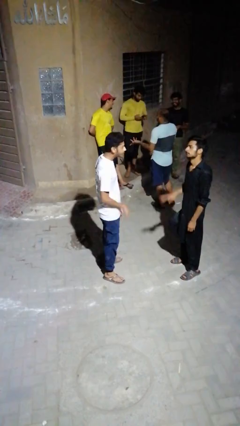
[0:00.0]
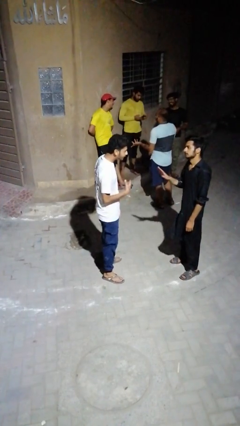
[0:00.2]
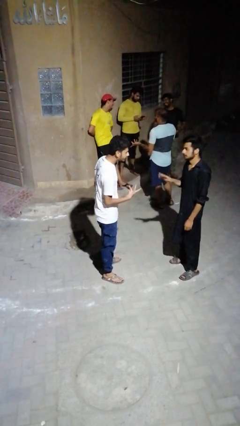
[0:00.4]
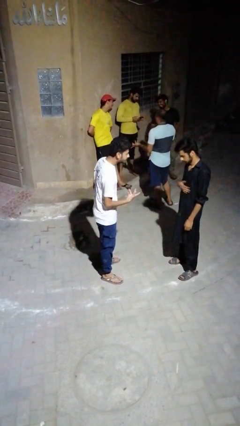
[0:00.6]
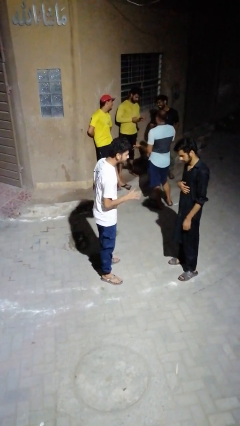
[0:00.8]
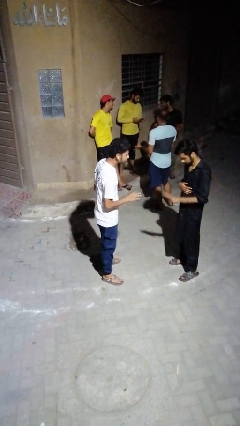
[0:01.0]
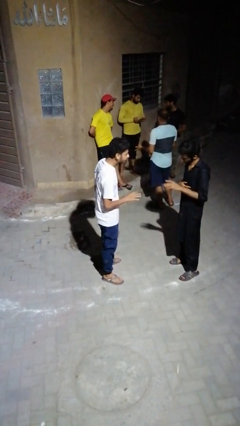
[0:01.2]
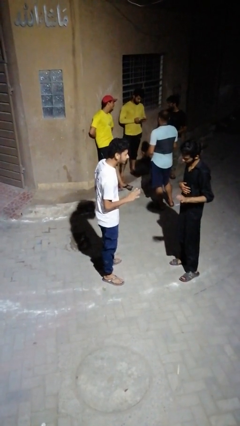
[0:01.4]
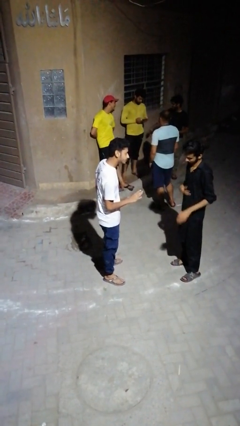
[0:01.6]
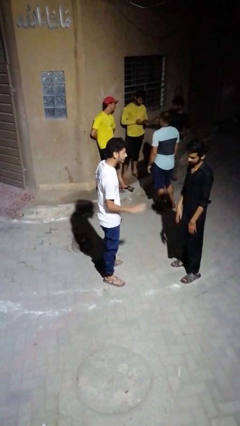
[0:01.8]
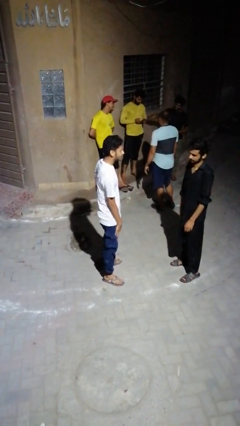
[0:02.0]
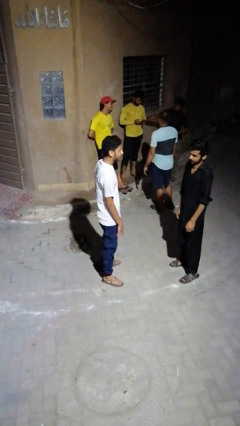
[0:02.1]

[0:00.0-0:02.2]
person talks to person

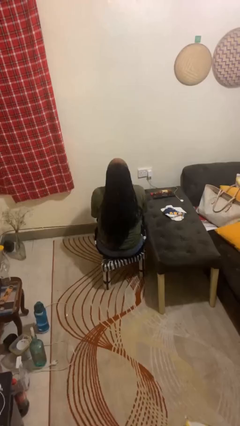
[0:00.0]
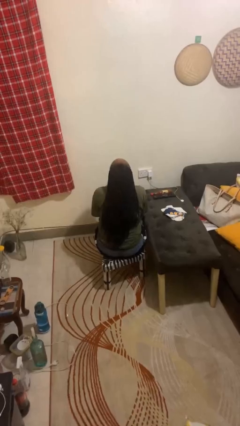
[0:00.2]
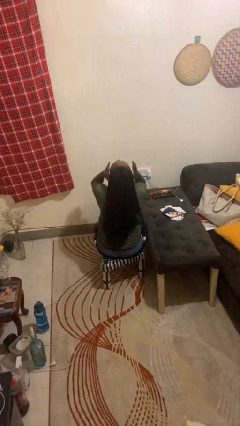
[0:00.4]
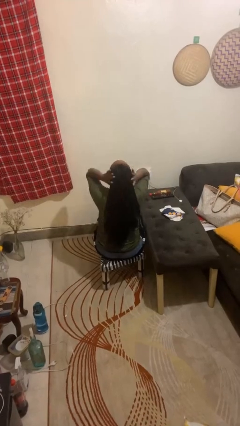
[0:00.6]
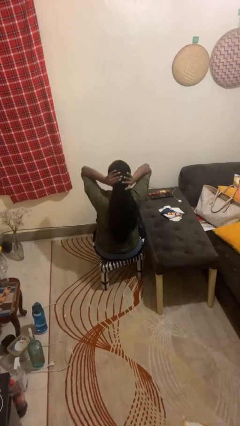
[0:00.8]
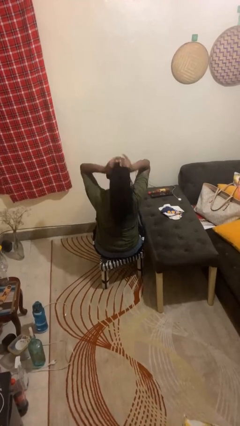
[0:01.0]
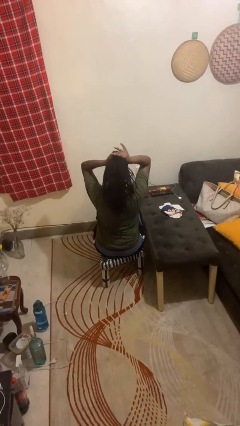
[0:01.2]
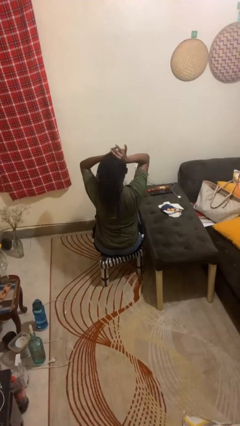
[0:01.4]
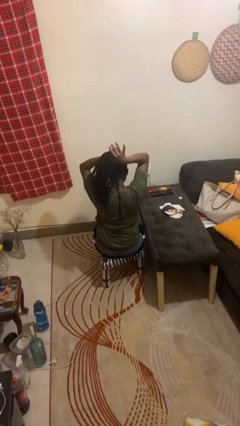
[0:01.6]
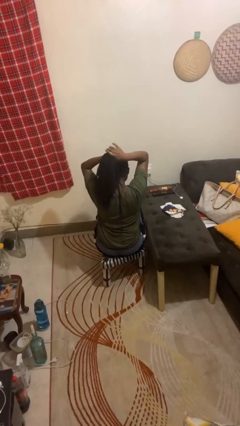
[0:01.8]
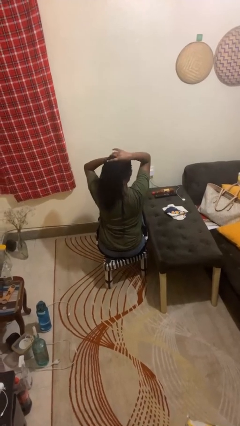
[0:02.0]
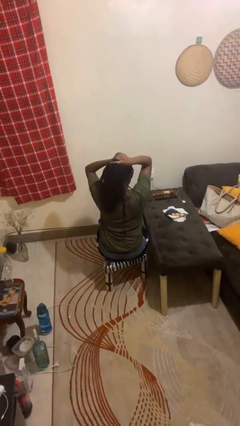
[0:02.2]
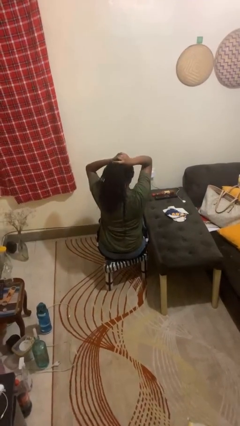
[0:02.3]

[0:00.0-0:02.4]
person puts hair in ponytail

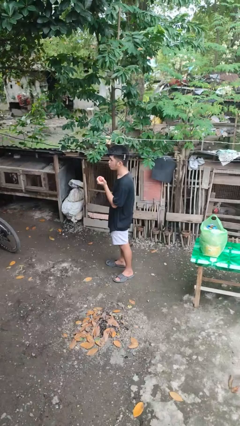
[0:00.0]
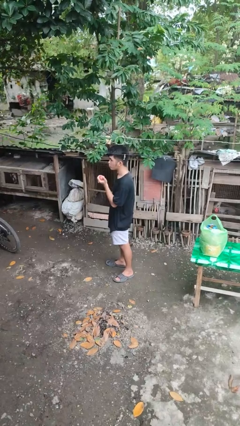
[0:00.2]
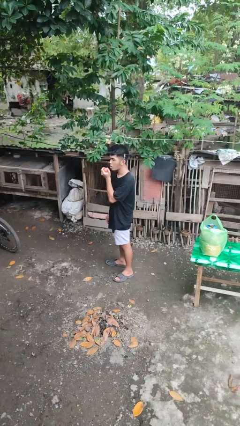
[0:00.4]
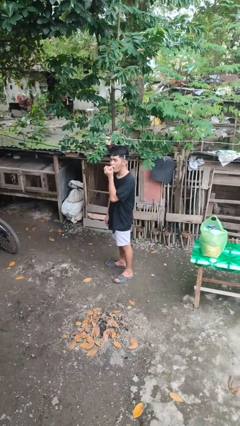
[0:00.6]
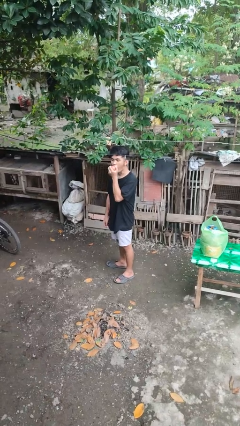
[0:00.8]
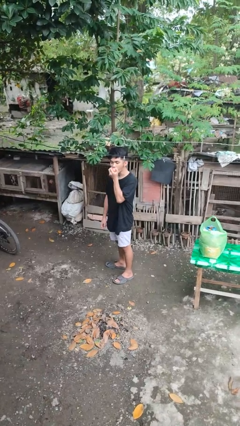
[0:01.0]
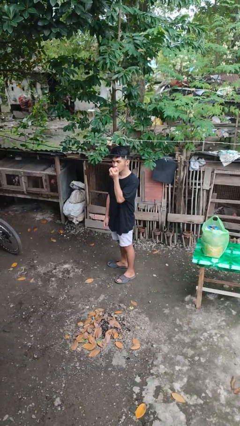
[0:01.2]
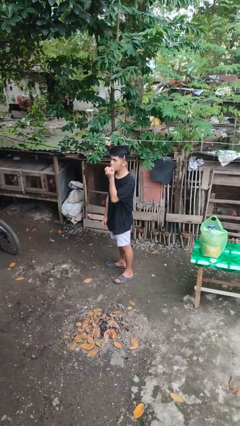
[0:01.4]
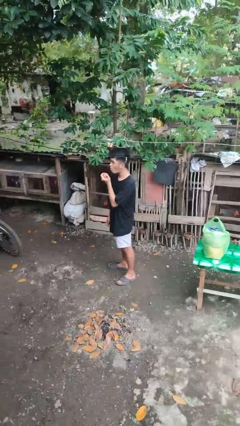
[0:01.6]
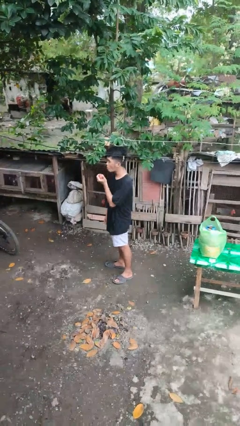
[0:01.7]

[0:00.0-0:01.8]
person eats apple

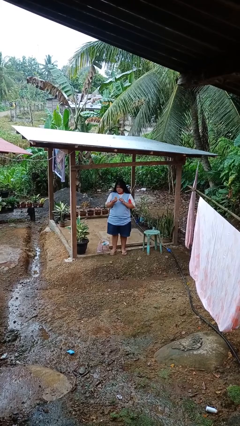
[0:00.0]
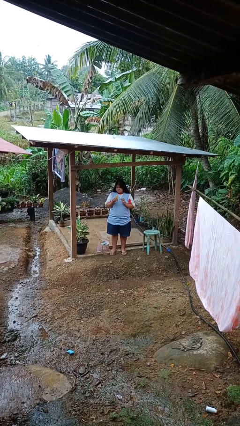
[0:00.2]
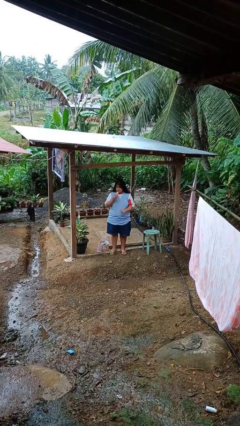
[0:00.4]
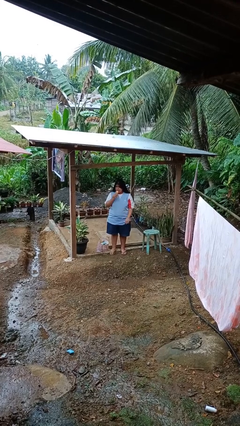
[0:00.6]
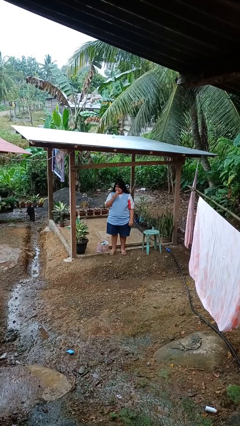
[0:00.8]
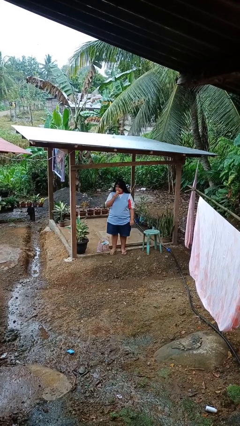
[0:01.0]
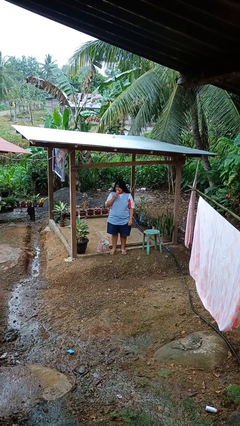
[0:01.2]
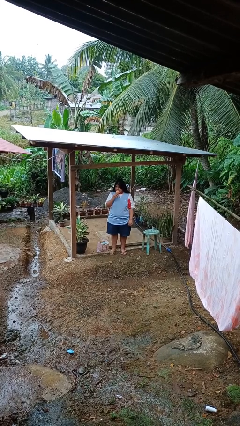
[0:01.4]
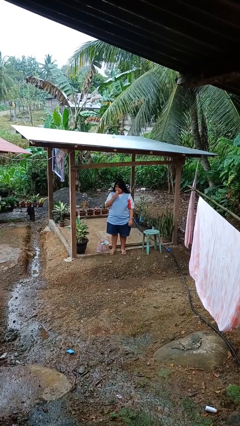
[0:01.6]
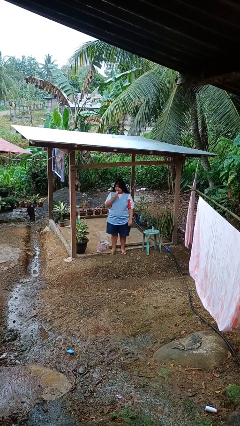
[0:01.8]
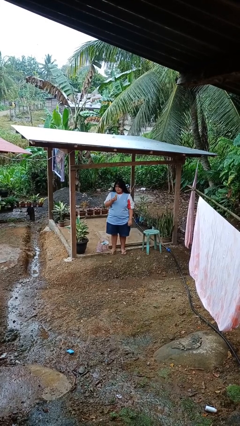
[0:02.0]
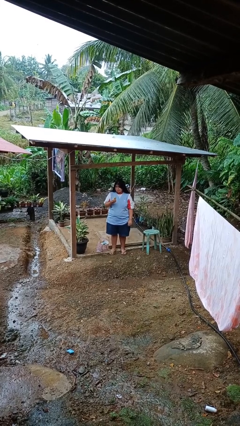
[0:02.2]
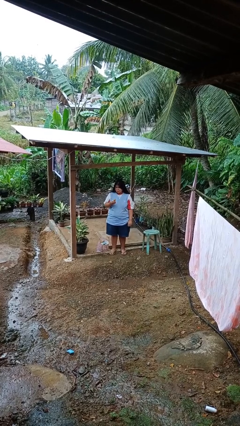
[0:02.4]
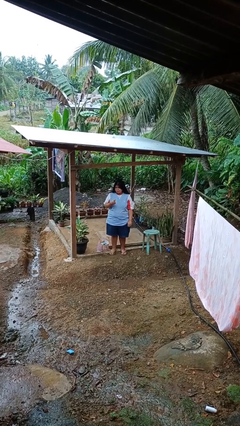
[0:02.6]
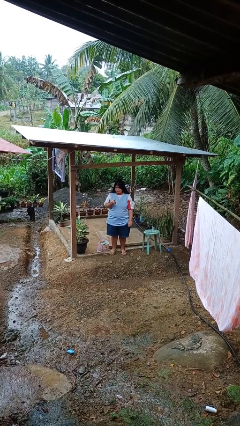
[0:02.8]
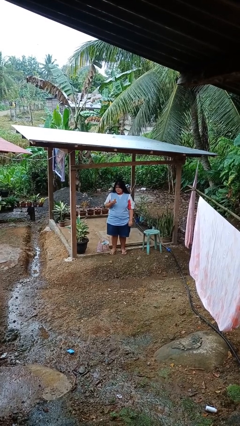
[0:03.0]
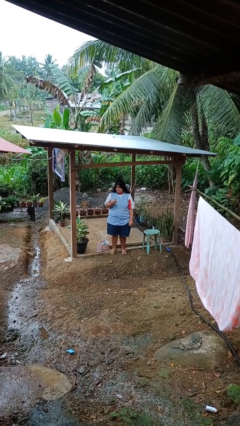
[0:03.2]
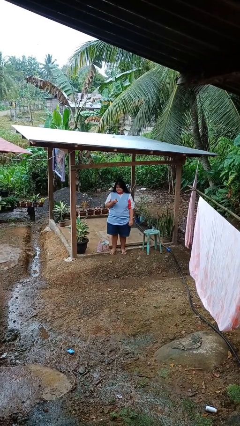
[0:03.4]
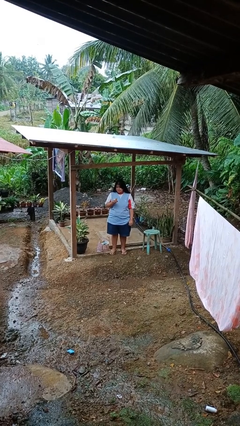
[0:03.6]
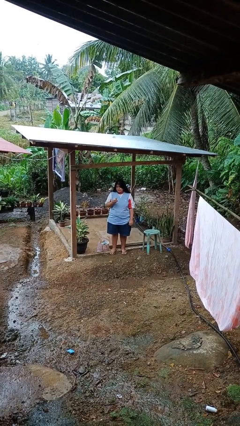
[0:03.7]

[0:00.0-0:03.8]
person eats banana

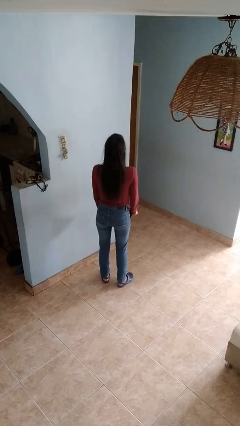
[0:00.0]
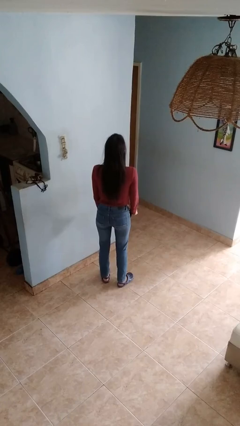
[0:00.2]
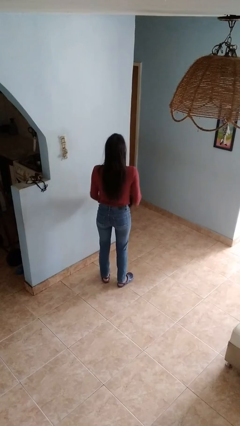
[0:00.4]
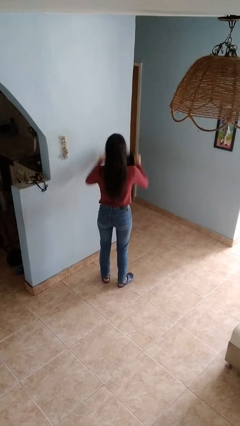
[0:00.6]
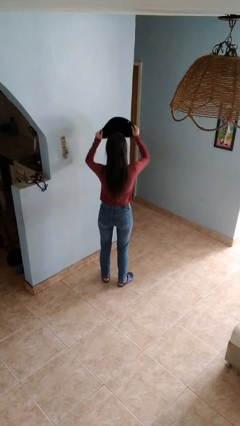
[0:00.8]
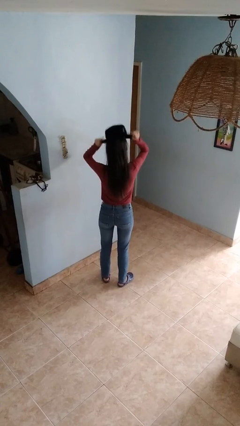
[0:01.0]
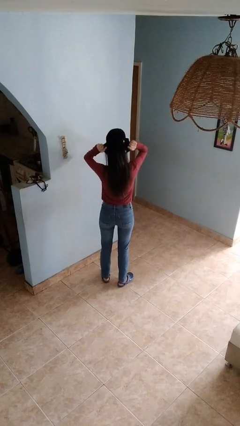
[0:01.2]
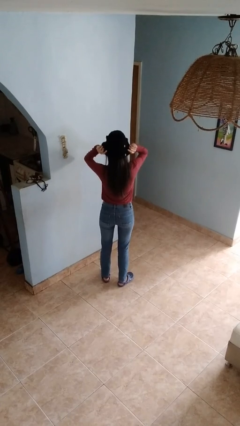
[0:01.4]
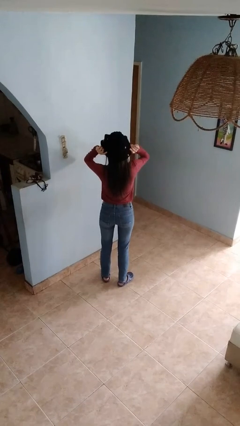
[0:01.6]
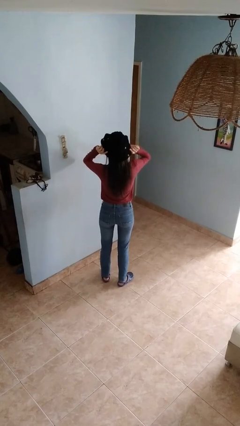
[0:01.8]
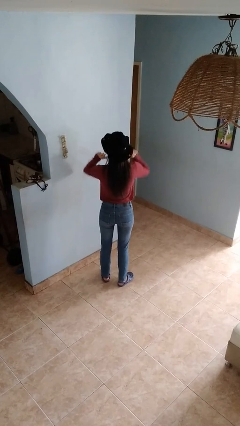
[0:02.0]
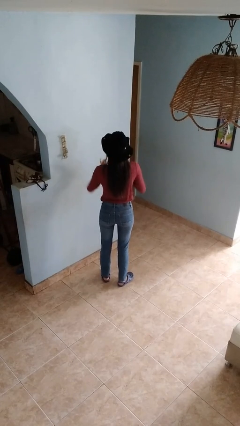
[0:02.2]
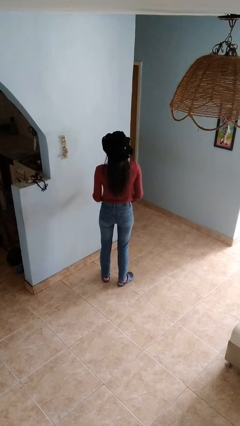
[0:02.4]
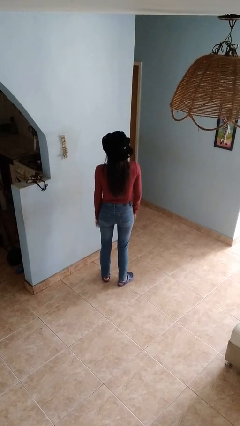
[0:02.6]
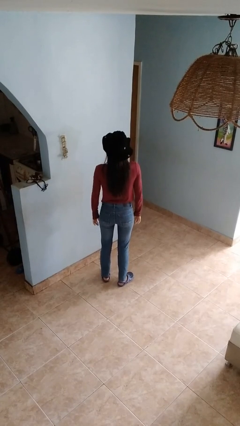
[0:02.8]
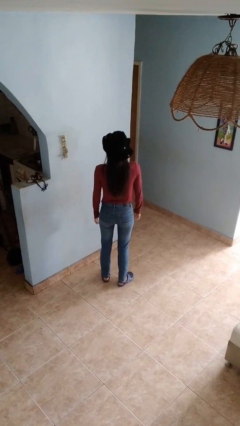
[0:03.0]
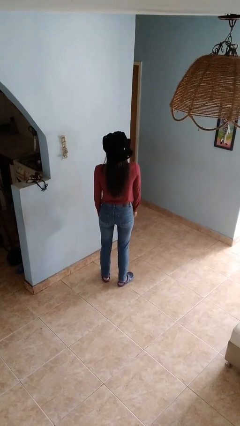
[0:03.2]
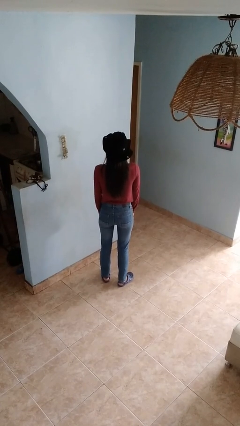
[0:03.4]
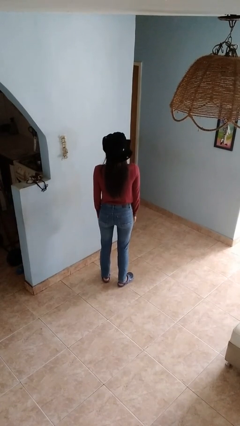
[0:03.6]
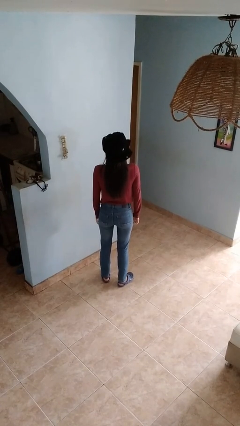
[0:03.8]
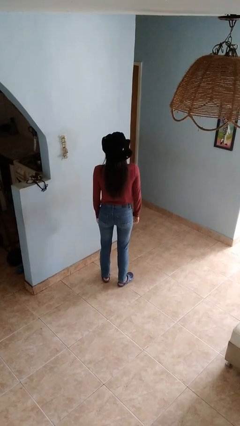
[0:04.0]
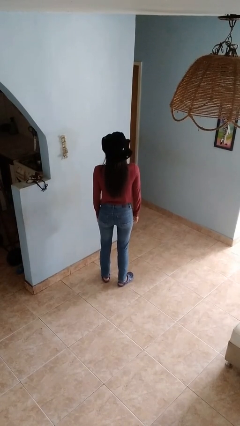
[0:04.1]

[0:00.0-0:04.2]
person puts on hat

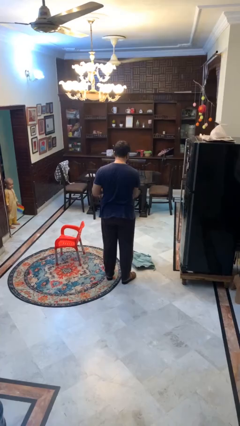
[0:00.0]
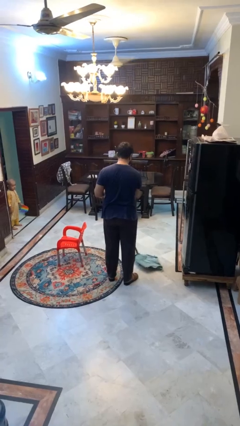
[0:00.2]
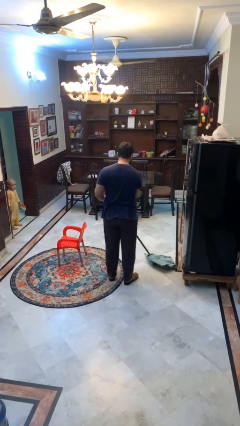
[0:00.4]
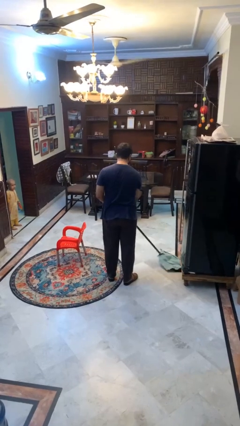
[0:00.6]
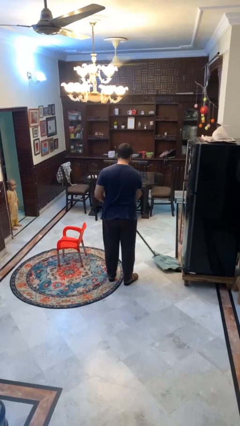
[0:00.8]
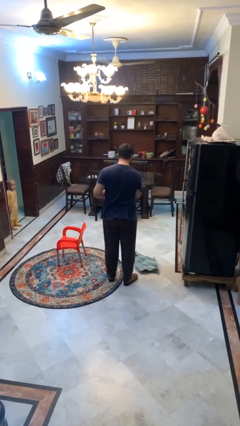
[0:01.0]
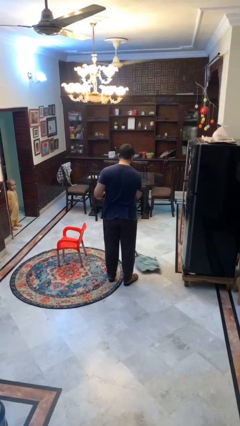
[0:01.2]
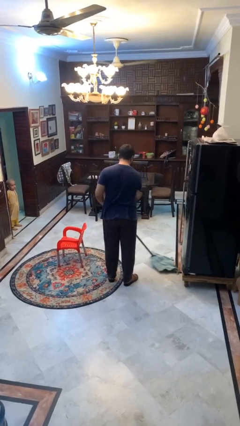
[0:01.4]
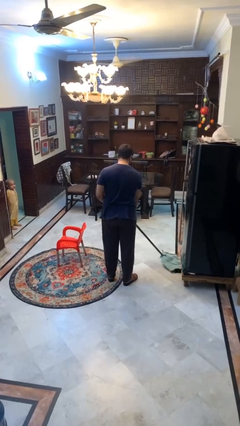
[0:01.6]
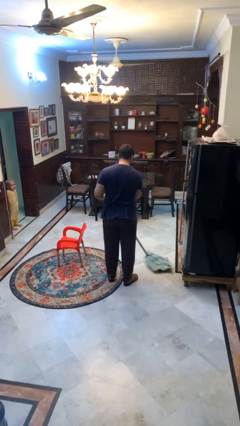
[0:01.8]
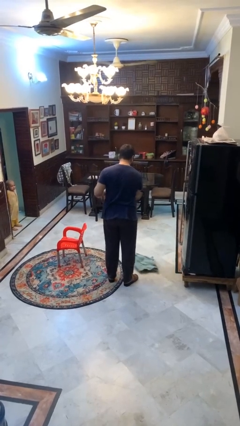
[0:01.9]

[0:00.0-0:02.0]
person mops

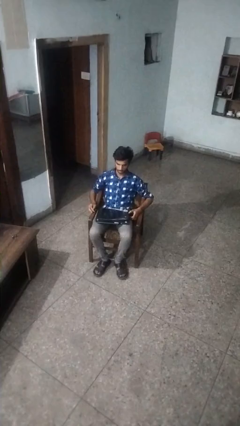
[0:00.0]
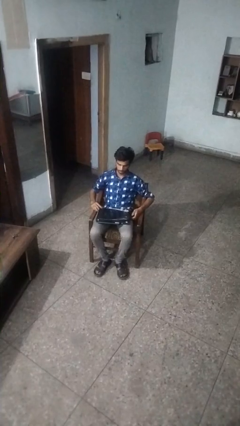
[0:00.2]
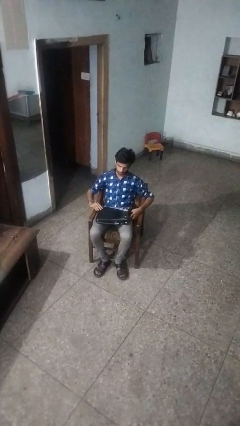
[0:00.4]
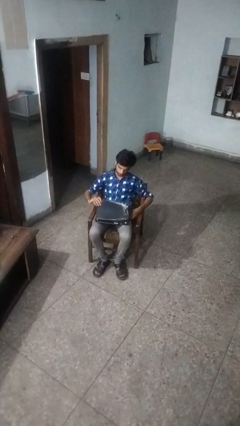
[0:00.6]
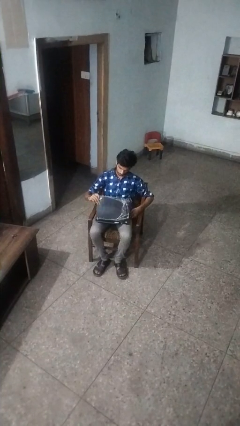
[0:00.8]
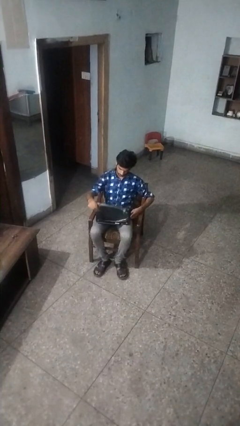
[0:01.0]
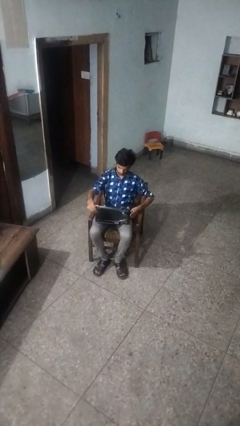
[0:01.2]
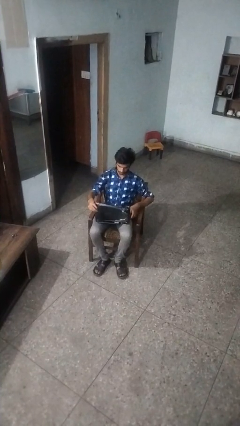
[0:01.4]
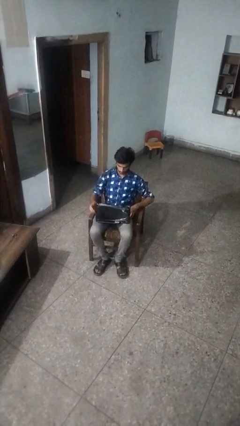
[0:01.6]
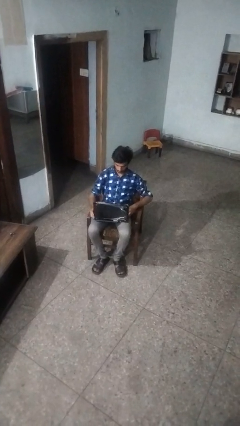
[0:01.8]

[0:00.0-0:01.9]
person opens laptop
